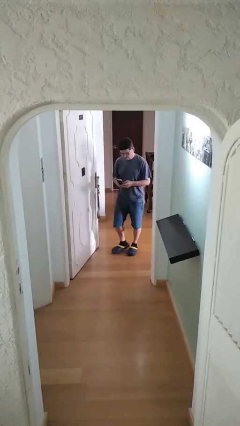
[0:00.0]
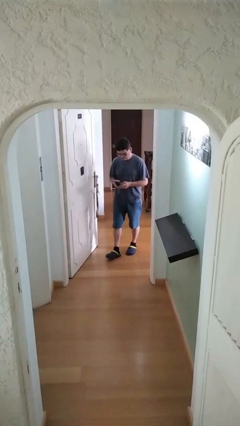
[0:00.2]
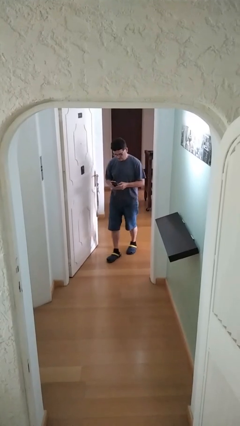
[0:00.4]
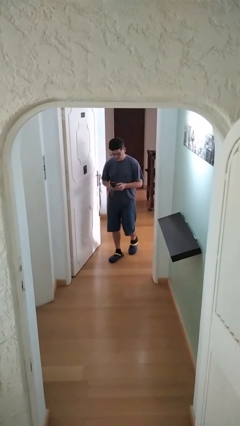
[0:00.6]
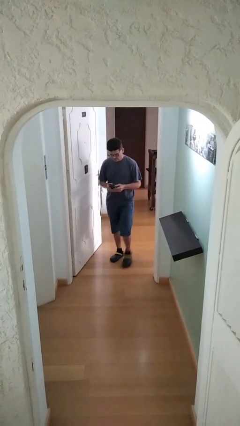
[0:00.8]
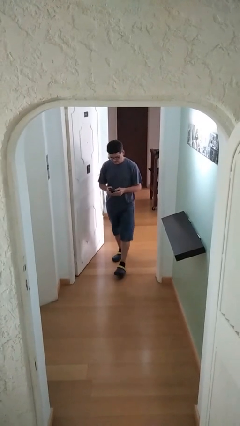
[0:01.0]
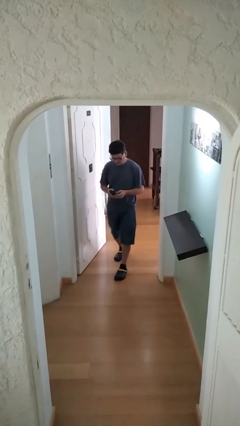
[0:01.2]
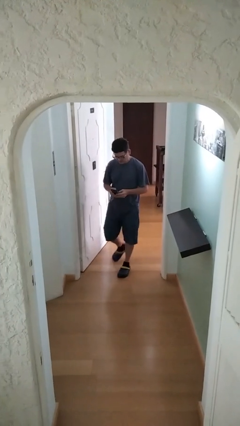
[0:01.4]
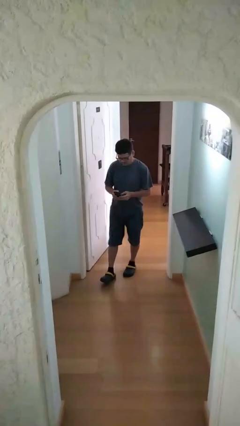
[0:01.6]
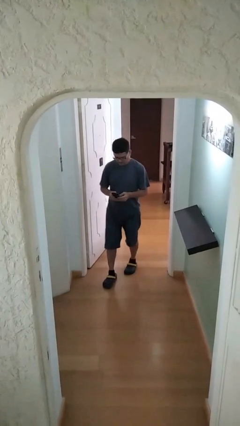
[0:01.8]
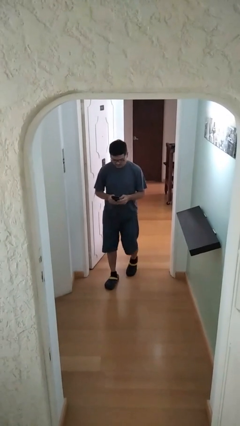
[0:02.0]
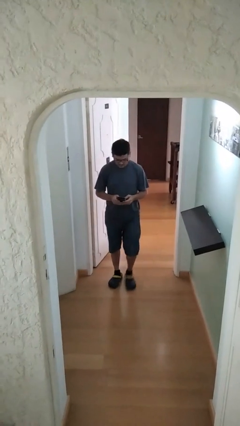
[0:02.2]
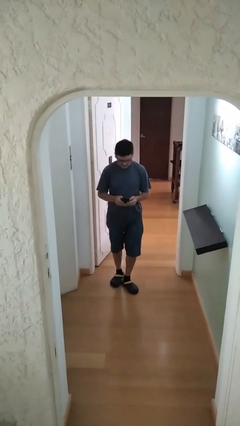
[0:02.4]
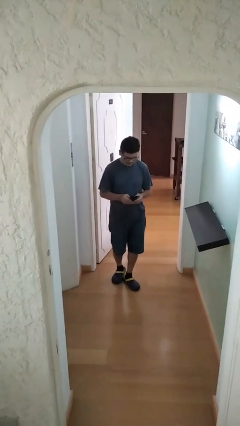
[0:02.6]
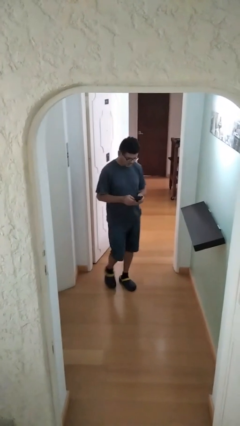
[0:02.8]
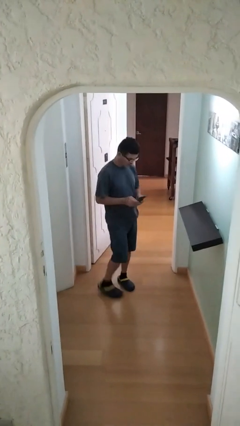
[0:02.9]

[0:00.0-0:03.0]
person enters scene through structure

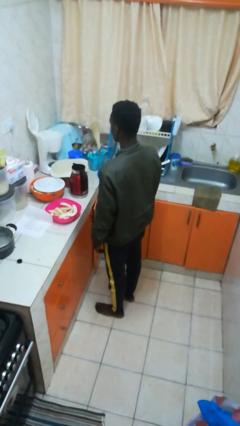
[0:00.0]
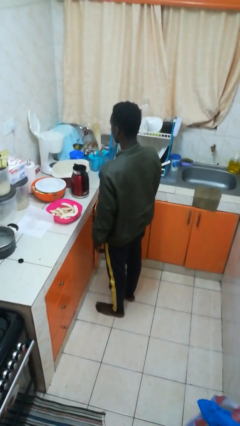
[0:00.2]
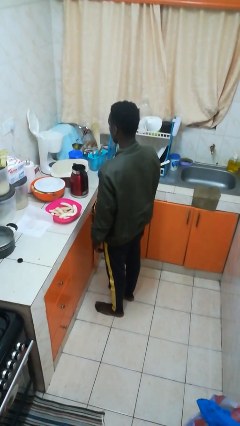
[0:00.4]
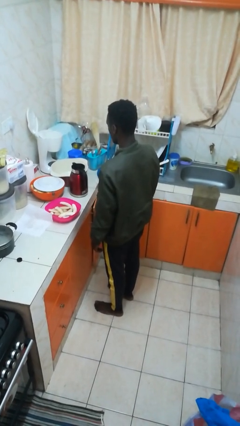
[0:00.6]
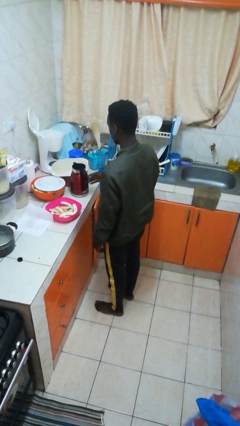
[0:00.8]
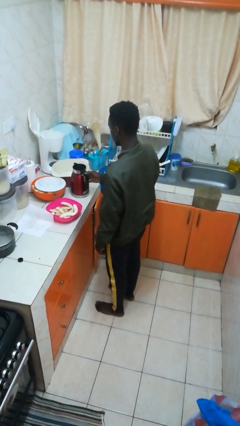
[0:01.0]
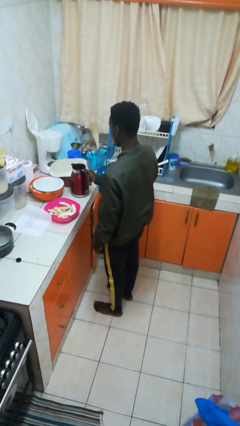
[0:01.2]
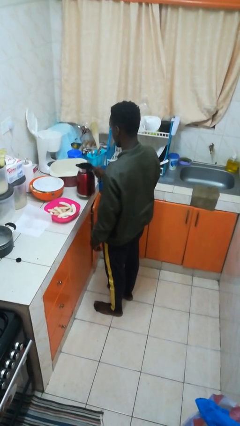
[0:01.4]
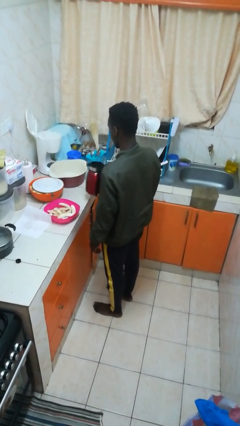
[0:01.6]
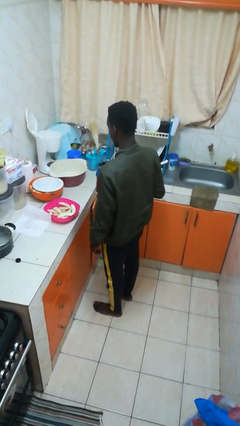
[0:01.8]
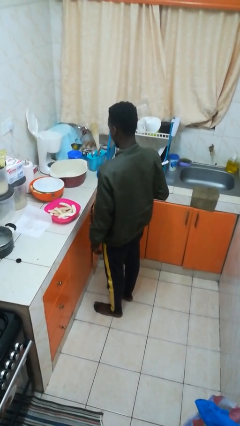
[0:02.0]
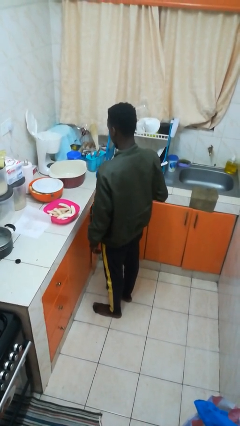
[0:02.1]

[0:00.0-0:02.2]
person picks up object from countertop

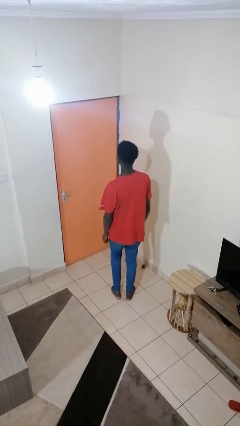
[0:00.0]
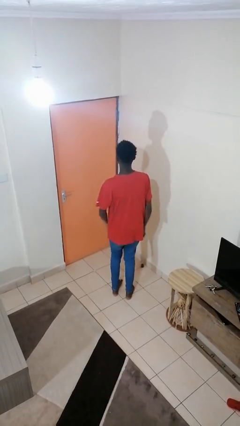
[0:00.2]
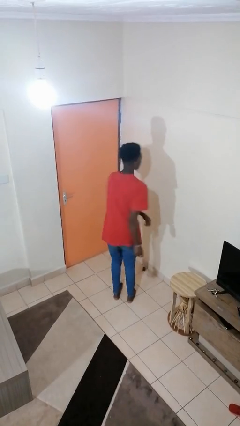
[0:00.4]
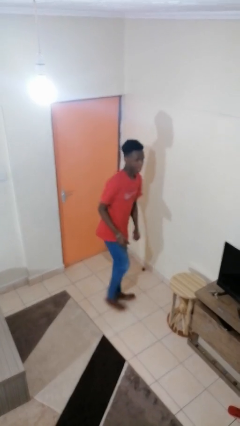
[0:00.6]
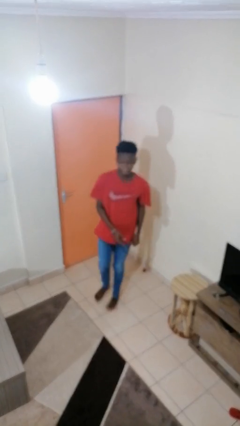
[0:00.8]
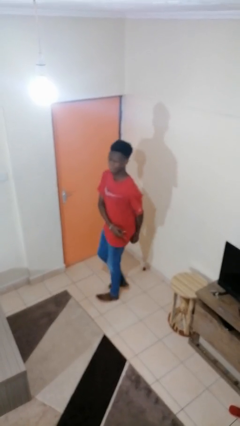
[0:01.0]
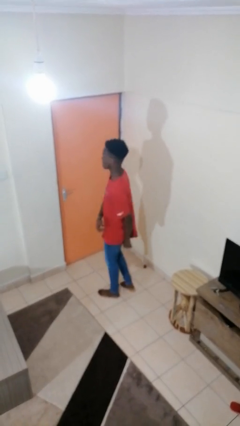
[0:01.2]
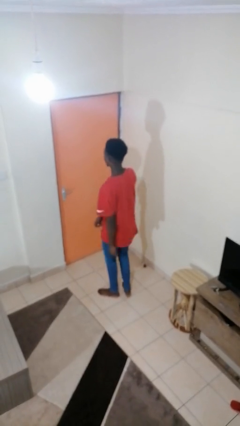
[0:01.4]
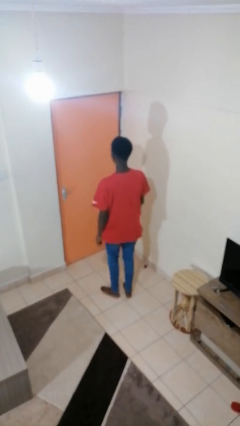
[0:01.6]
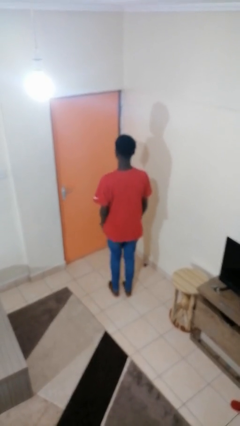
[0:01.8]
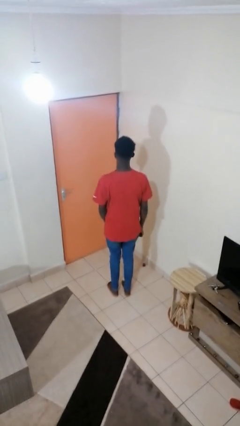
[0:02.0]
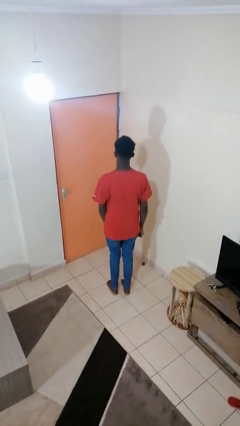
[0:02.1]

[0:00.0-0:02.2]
person twirls

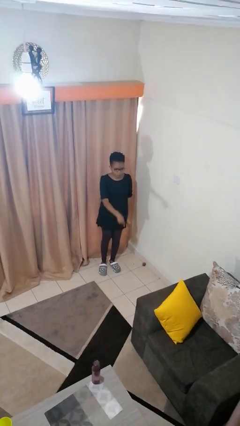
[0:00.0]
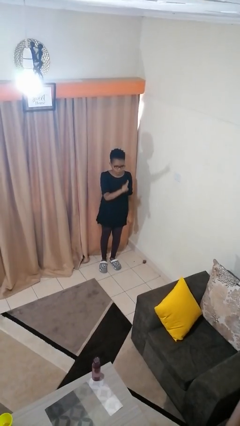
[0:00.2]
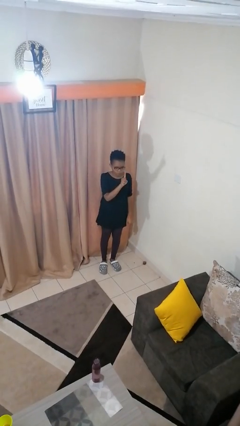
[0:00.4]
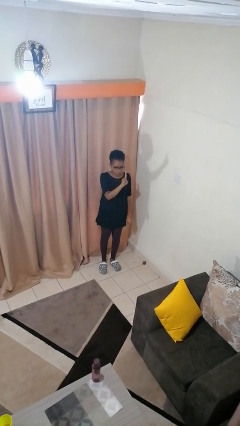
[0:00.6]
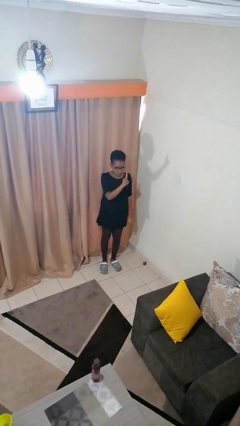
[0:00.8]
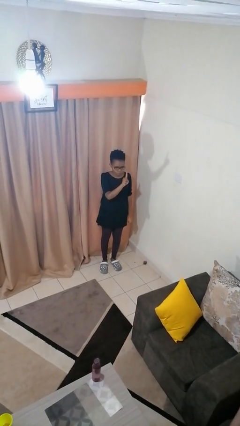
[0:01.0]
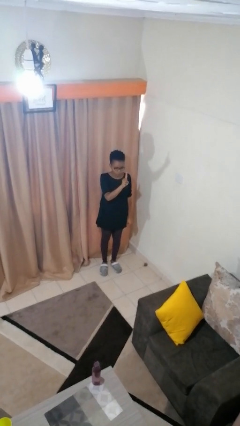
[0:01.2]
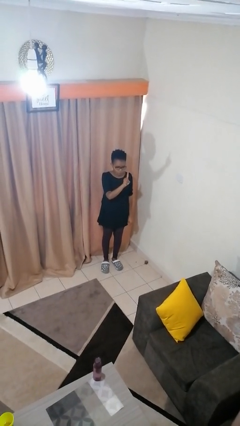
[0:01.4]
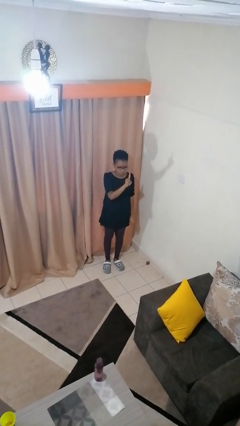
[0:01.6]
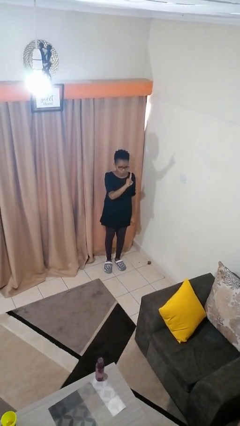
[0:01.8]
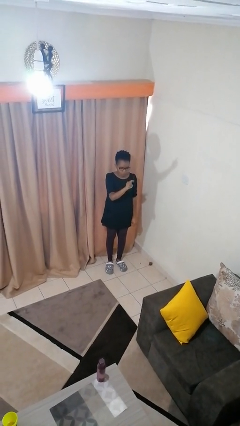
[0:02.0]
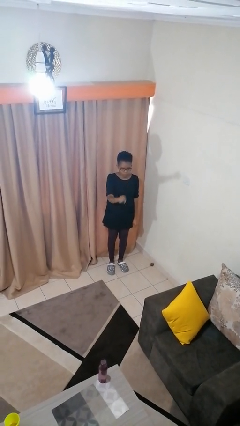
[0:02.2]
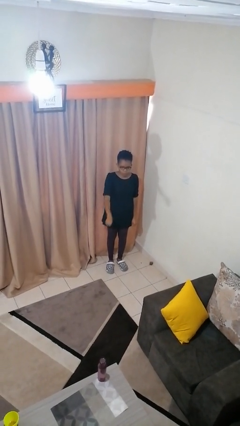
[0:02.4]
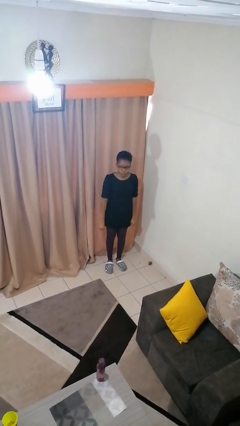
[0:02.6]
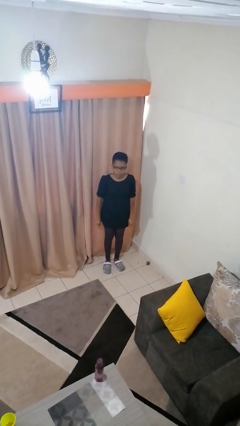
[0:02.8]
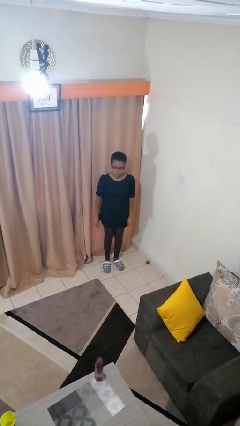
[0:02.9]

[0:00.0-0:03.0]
person gestures number one

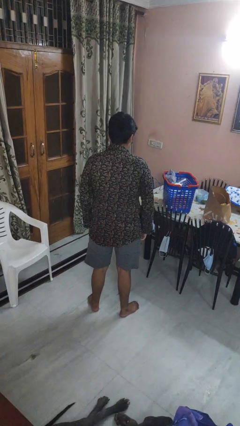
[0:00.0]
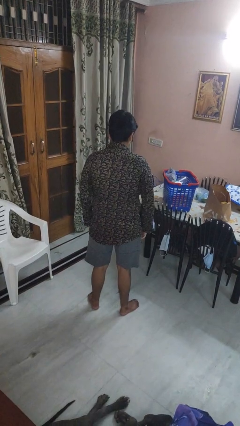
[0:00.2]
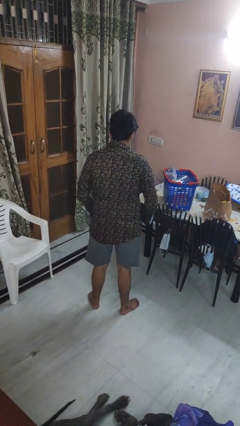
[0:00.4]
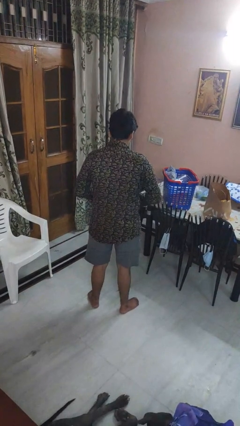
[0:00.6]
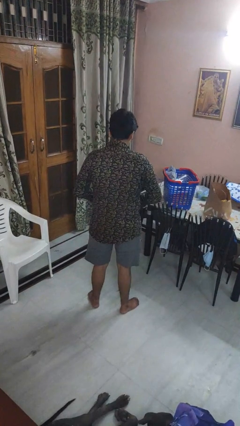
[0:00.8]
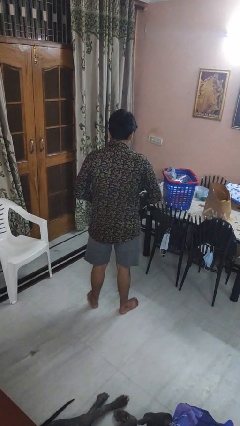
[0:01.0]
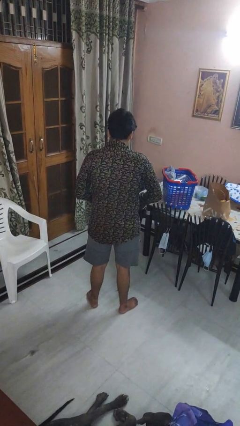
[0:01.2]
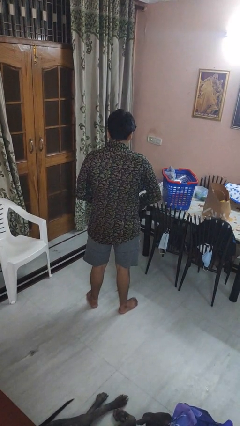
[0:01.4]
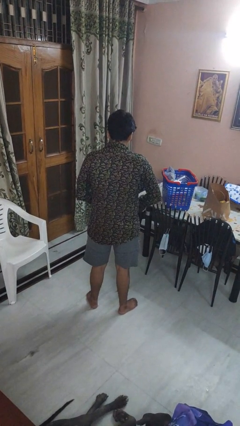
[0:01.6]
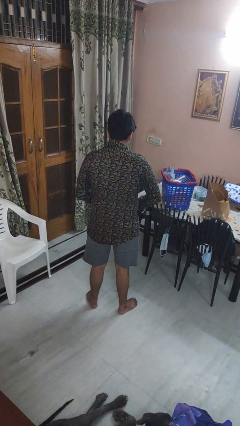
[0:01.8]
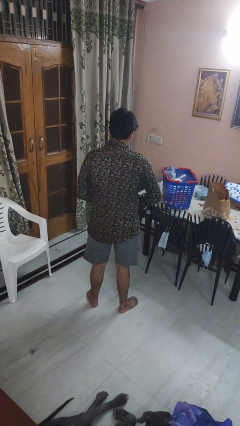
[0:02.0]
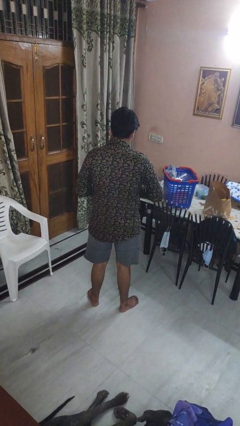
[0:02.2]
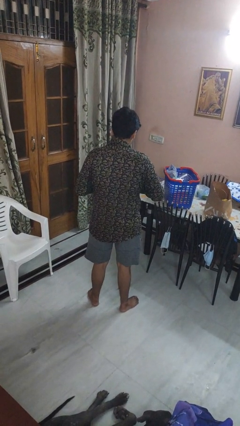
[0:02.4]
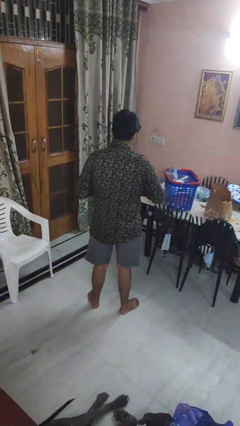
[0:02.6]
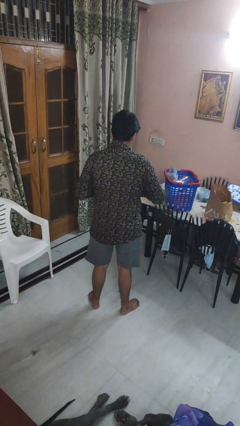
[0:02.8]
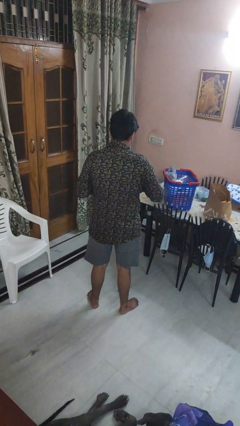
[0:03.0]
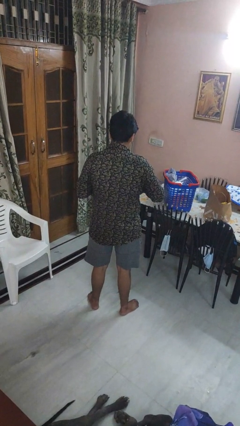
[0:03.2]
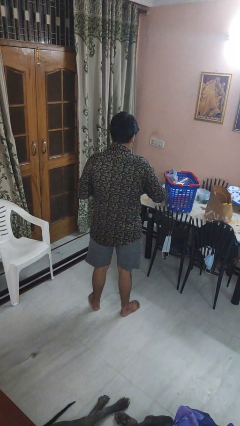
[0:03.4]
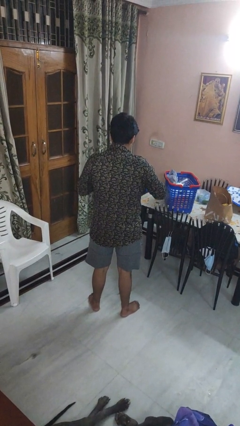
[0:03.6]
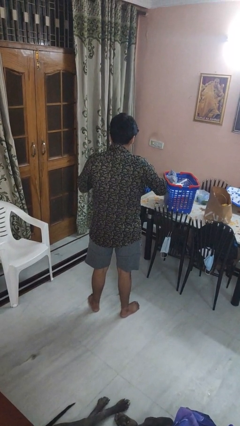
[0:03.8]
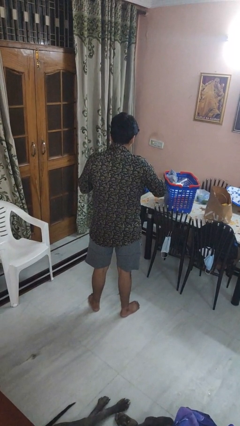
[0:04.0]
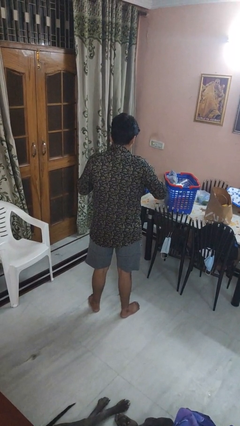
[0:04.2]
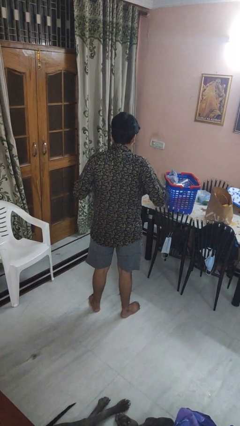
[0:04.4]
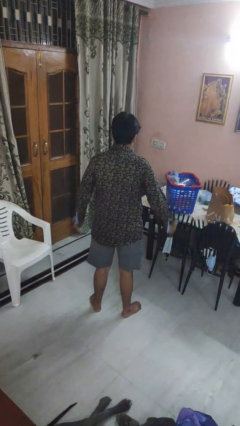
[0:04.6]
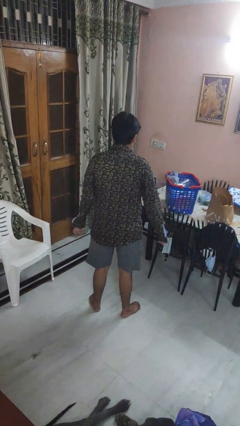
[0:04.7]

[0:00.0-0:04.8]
person unbuttons shirt

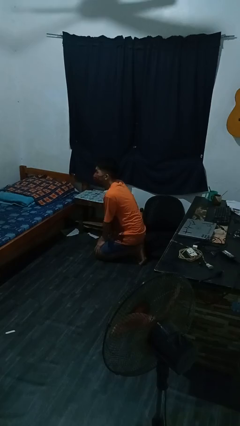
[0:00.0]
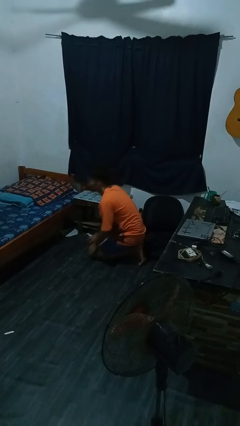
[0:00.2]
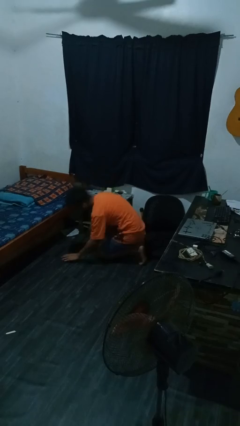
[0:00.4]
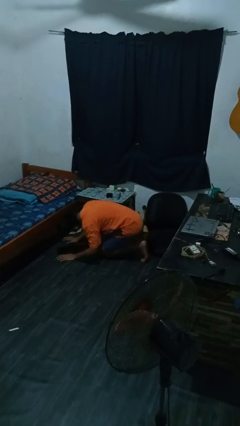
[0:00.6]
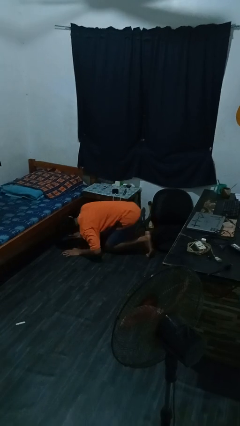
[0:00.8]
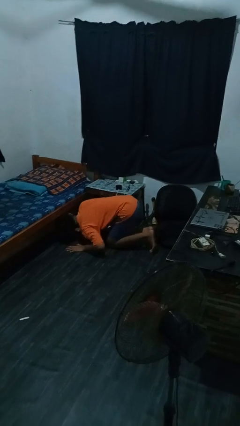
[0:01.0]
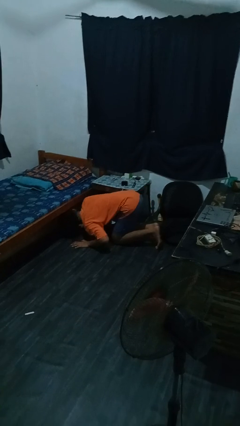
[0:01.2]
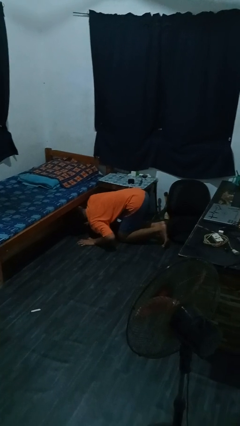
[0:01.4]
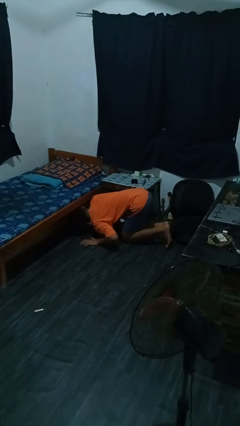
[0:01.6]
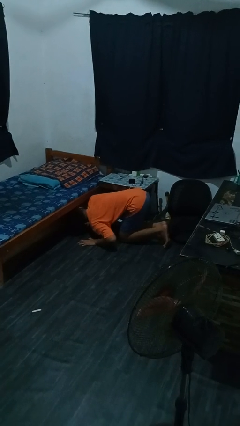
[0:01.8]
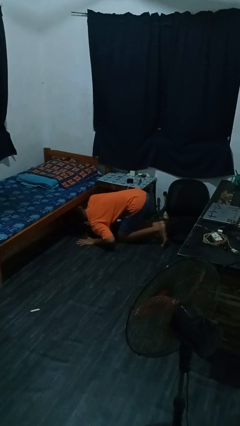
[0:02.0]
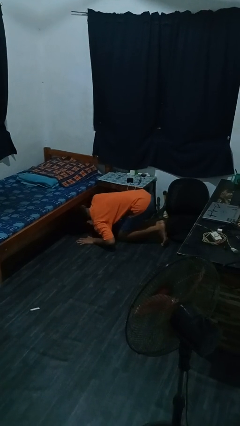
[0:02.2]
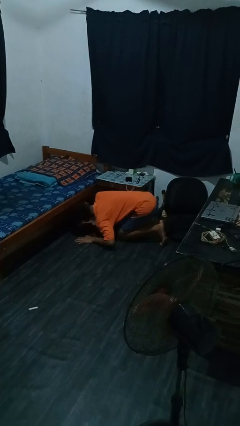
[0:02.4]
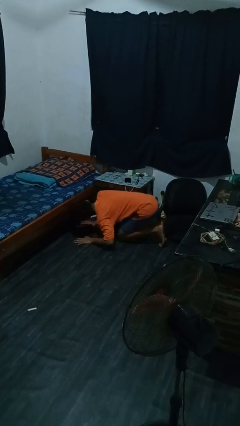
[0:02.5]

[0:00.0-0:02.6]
person searches under bed
